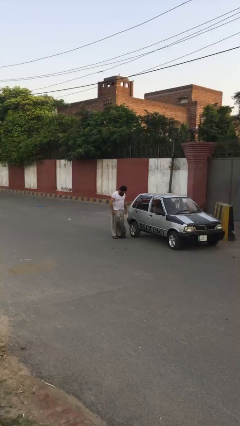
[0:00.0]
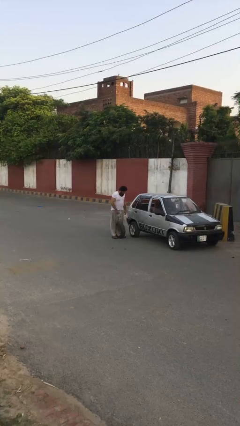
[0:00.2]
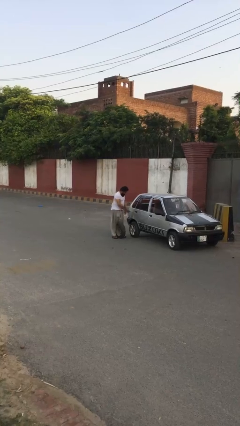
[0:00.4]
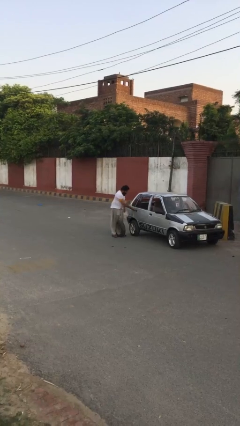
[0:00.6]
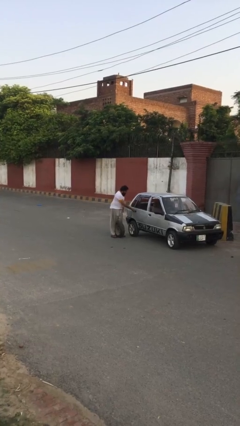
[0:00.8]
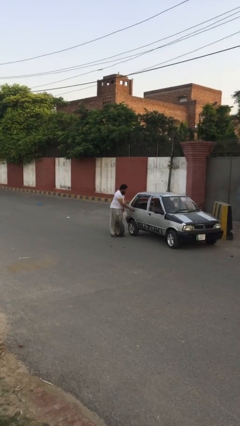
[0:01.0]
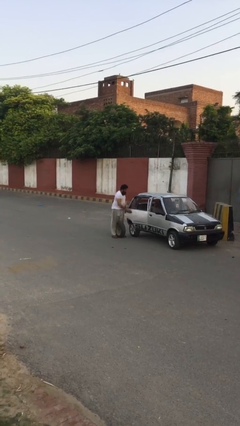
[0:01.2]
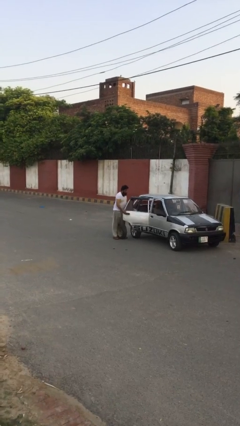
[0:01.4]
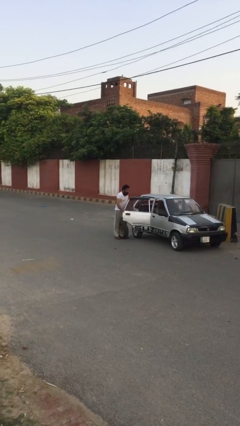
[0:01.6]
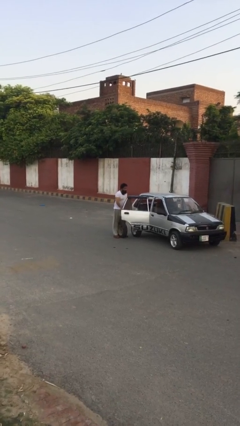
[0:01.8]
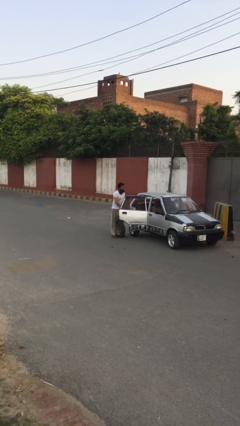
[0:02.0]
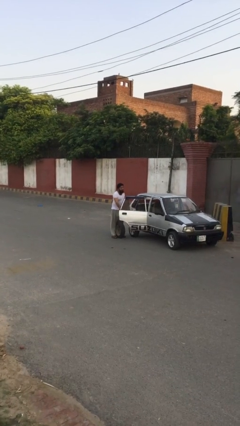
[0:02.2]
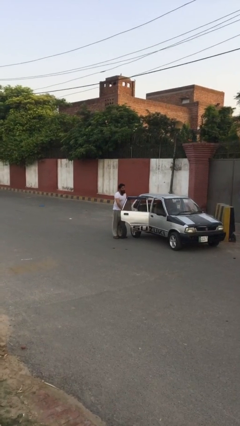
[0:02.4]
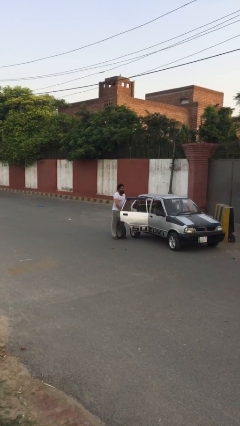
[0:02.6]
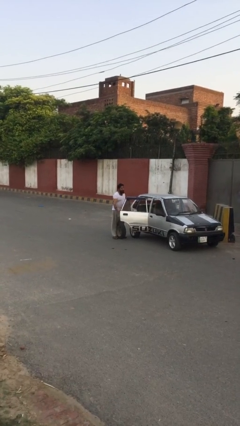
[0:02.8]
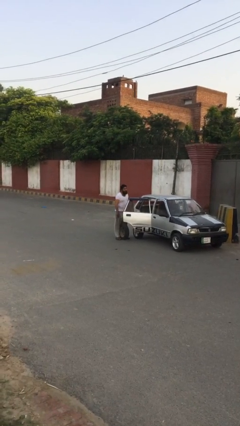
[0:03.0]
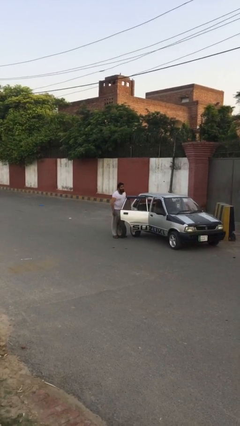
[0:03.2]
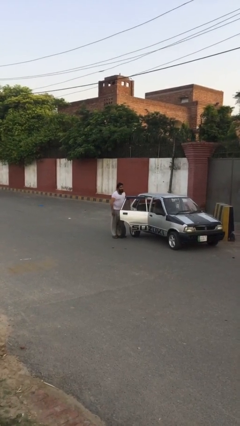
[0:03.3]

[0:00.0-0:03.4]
person opens car door

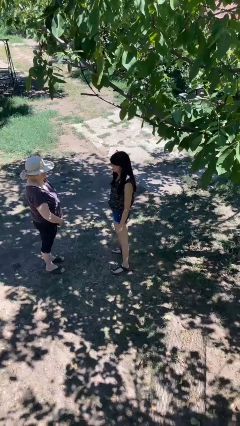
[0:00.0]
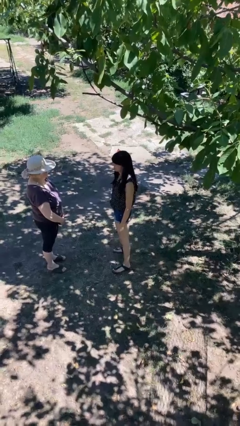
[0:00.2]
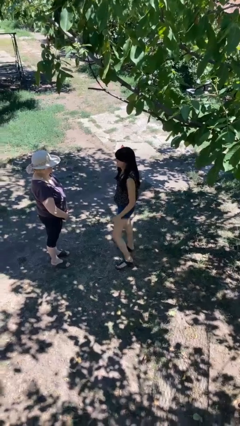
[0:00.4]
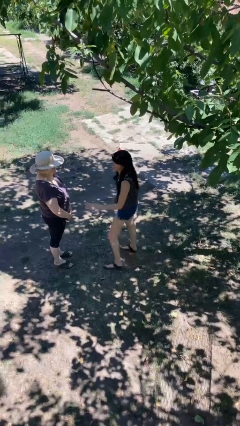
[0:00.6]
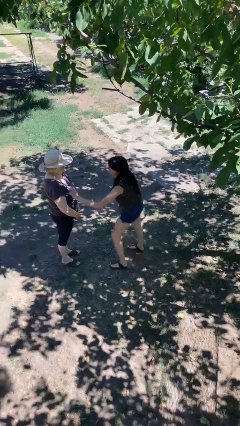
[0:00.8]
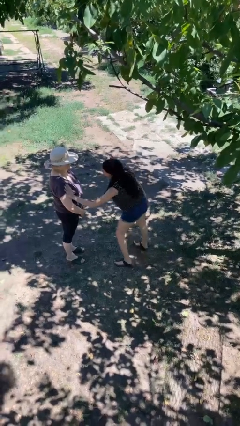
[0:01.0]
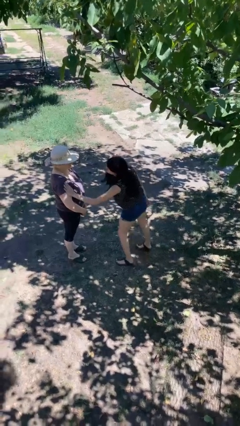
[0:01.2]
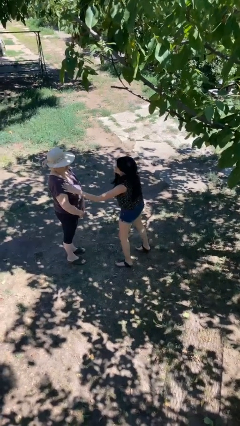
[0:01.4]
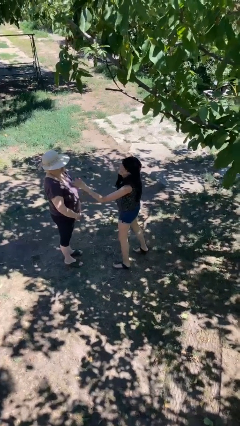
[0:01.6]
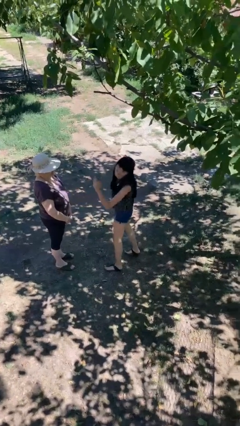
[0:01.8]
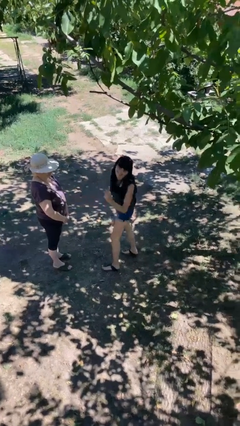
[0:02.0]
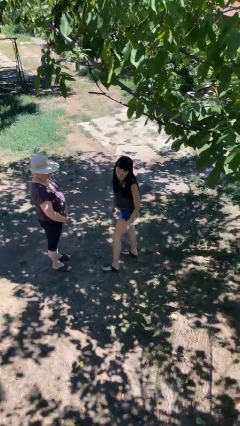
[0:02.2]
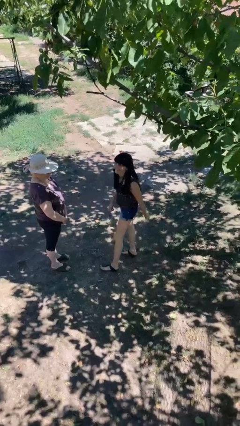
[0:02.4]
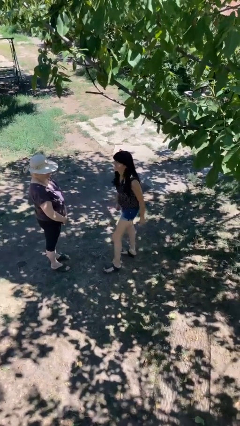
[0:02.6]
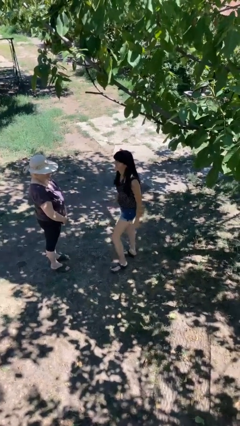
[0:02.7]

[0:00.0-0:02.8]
person shoves person

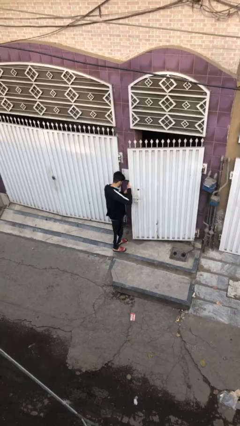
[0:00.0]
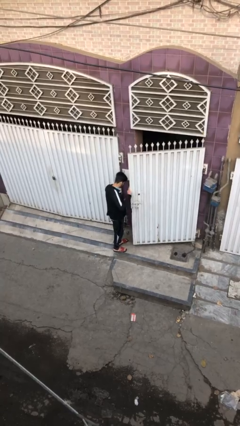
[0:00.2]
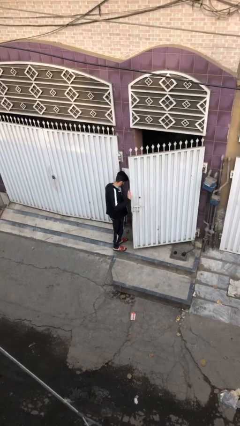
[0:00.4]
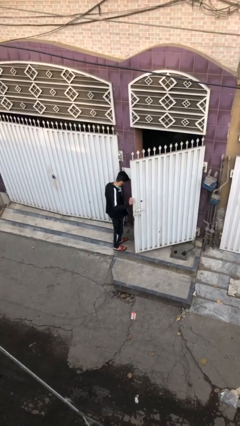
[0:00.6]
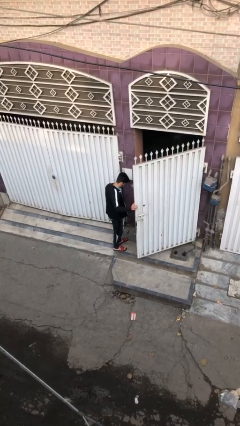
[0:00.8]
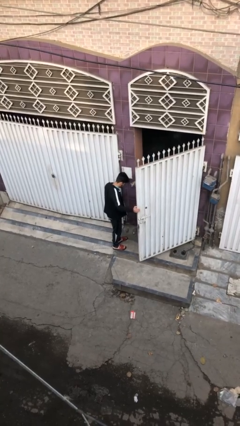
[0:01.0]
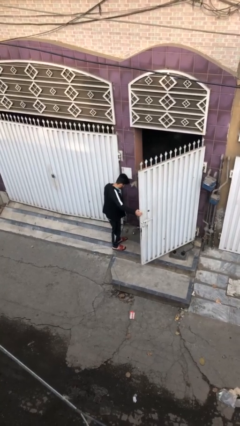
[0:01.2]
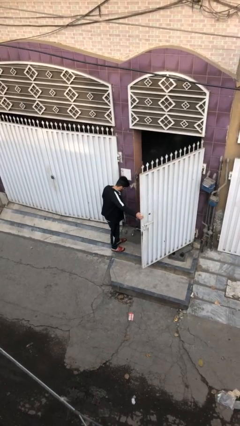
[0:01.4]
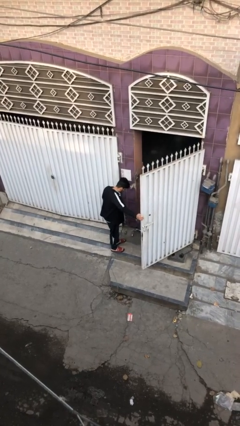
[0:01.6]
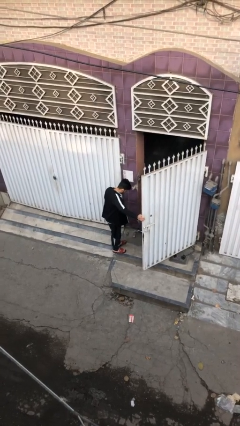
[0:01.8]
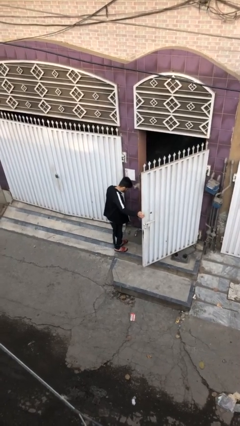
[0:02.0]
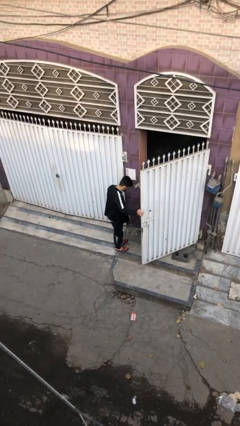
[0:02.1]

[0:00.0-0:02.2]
person opens facility door

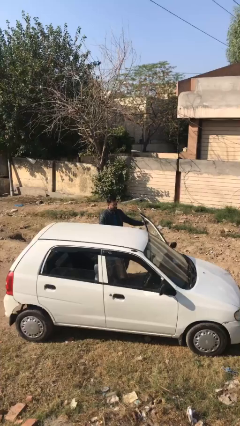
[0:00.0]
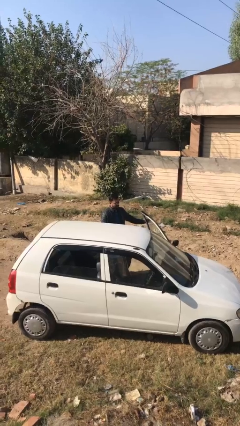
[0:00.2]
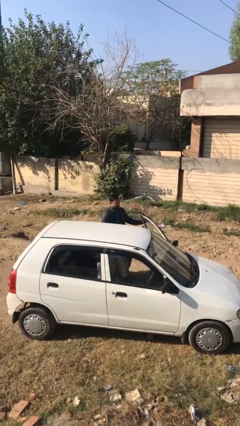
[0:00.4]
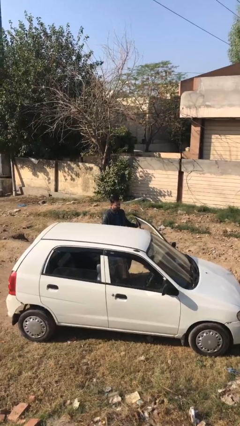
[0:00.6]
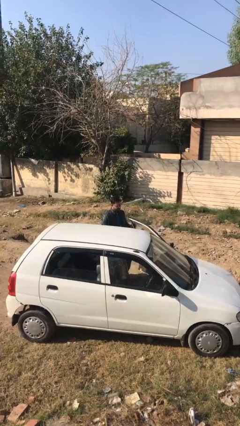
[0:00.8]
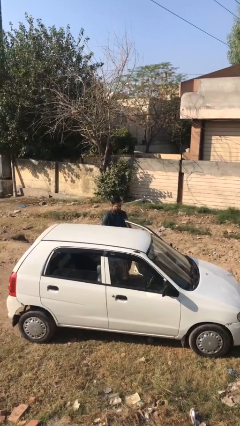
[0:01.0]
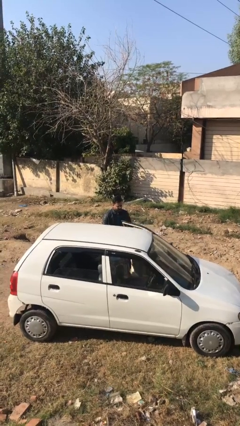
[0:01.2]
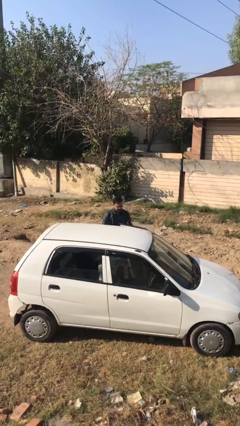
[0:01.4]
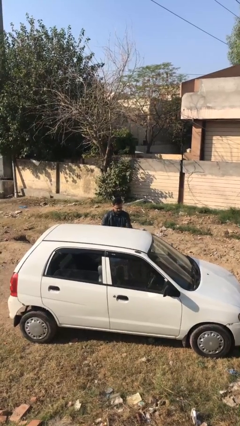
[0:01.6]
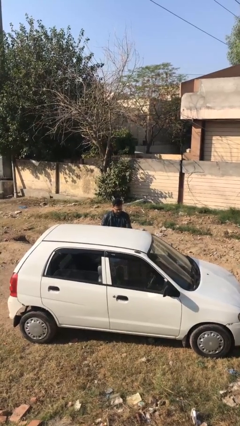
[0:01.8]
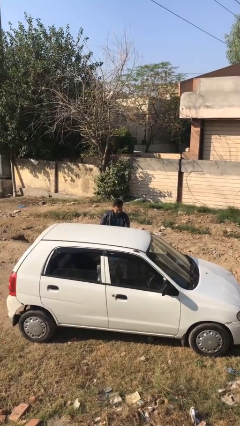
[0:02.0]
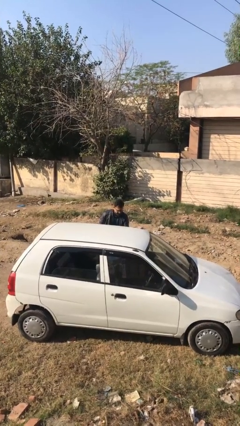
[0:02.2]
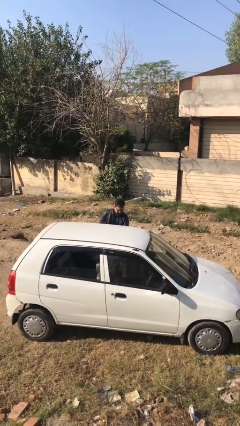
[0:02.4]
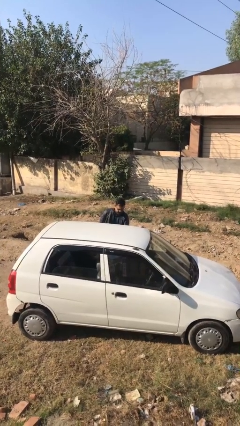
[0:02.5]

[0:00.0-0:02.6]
person closes car door

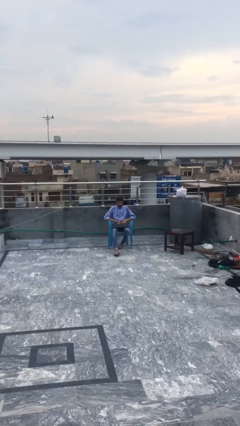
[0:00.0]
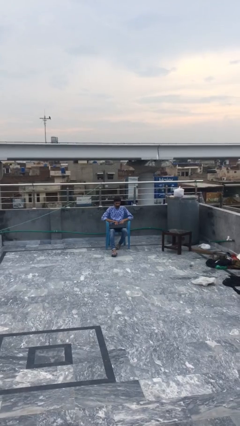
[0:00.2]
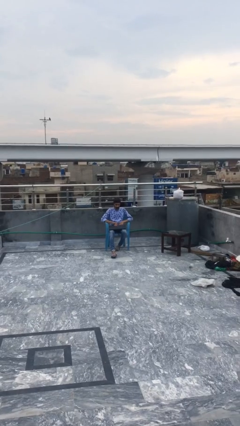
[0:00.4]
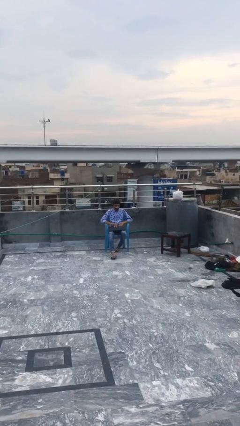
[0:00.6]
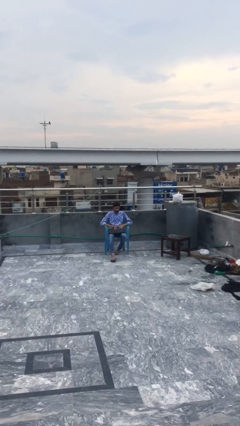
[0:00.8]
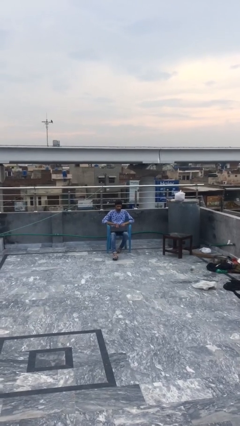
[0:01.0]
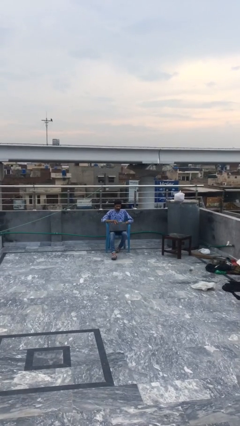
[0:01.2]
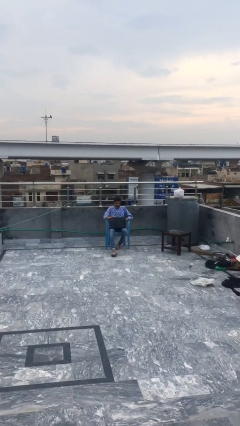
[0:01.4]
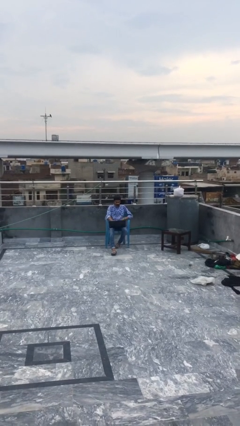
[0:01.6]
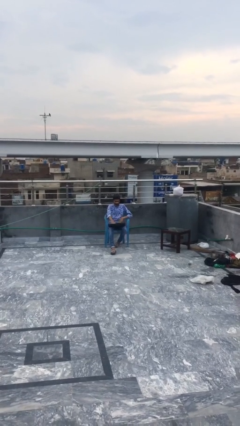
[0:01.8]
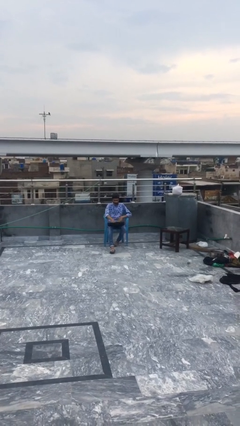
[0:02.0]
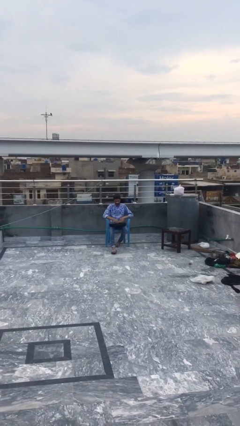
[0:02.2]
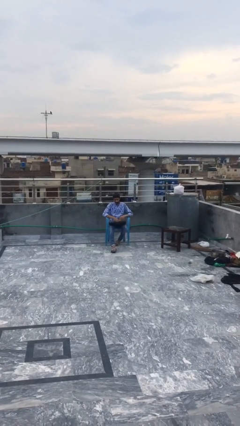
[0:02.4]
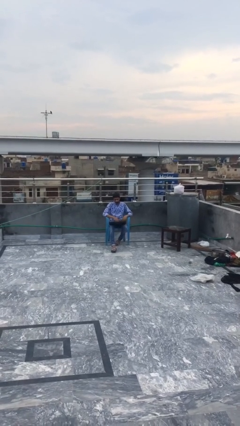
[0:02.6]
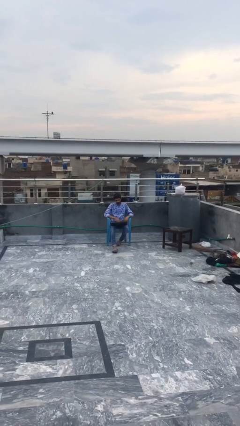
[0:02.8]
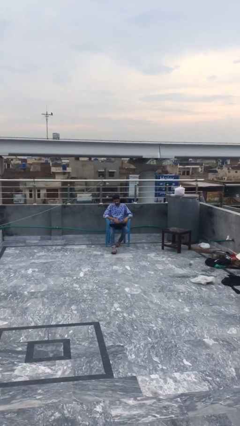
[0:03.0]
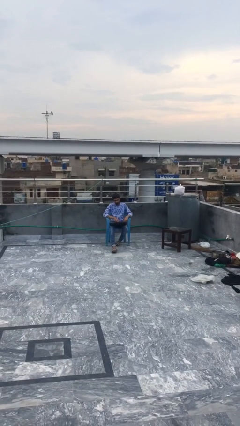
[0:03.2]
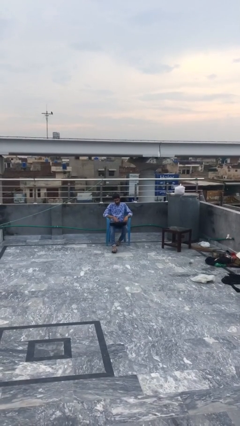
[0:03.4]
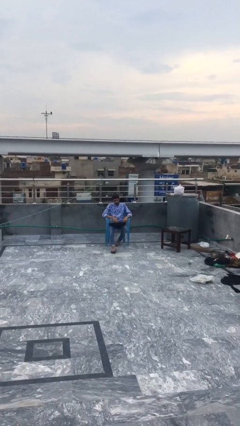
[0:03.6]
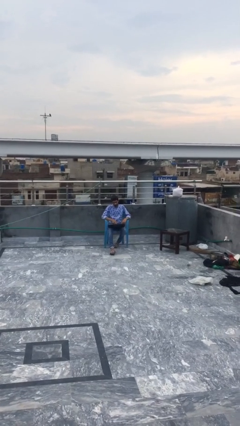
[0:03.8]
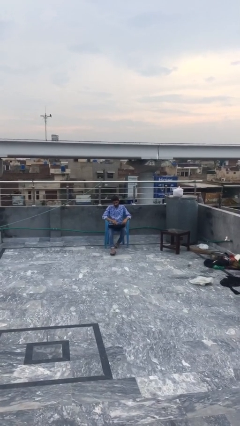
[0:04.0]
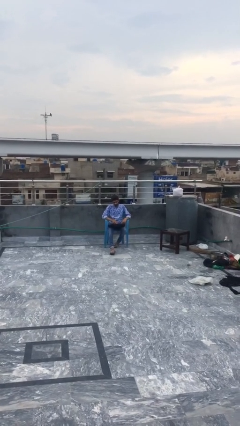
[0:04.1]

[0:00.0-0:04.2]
person interacts with laptop

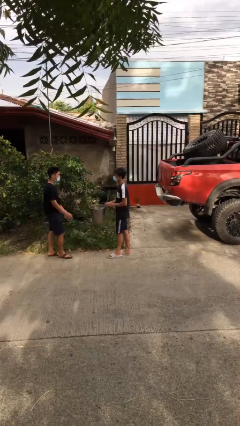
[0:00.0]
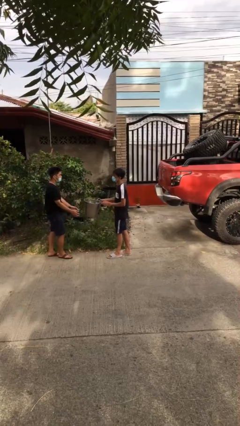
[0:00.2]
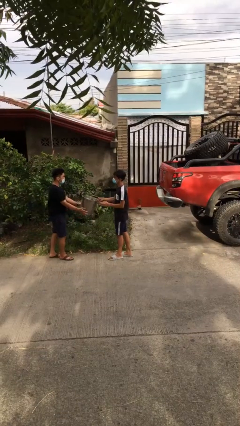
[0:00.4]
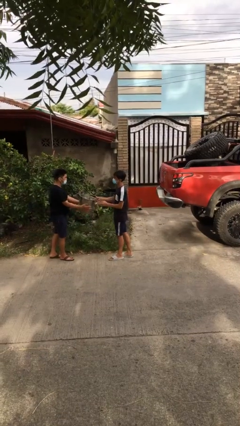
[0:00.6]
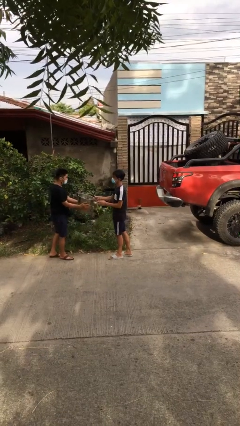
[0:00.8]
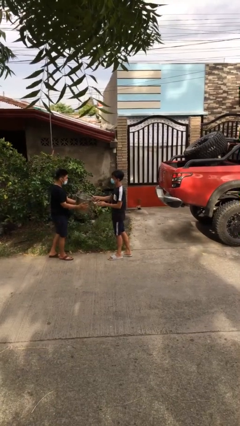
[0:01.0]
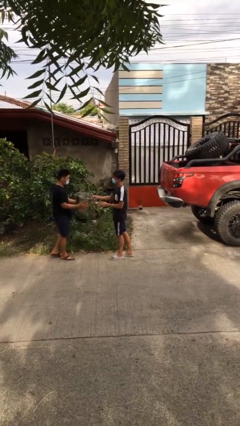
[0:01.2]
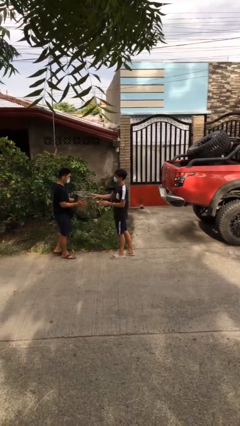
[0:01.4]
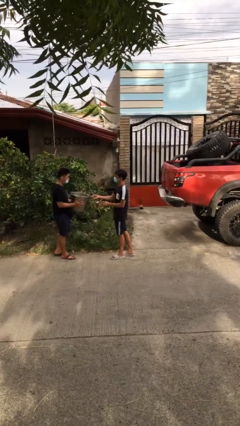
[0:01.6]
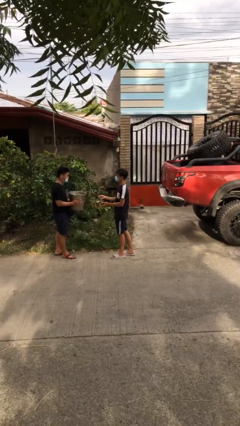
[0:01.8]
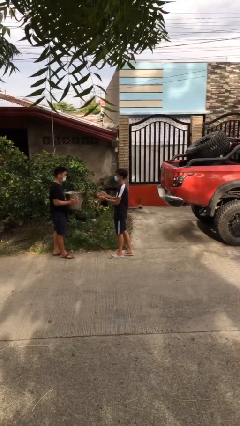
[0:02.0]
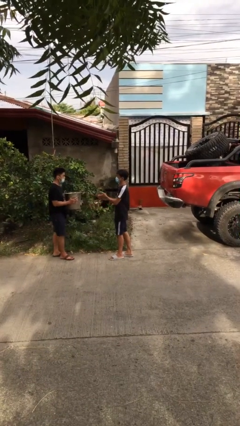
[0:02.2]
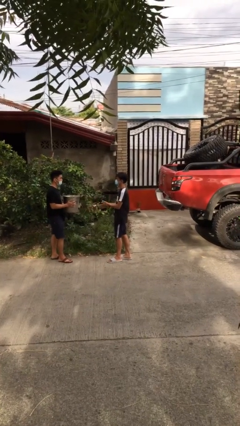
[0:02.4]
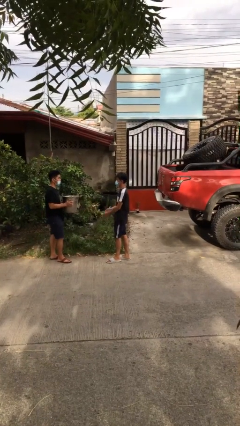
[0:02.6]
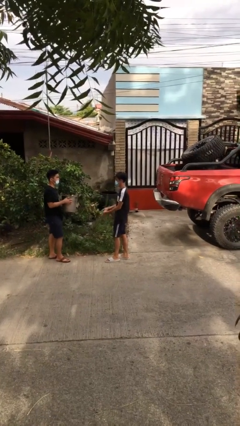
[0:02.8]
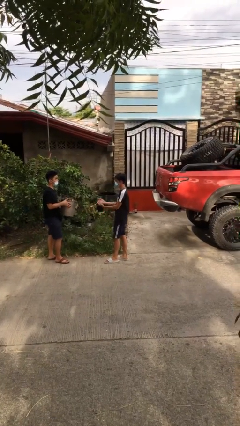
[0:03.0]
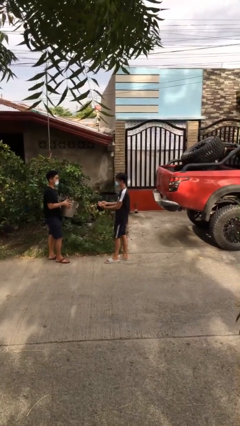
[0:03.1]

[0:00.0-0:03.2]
person transfers object to person
